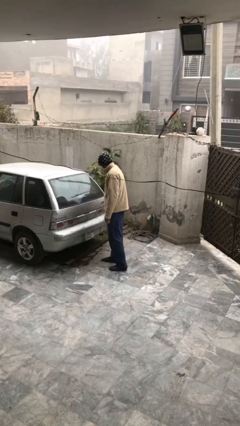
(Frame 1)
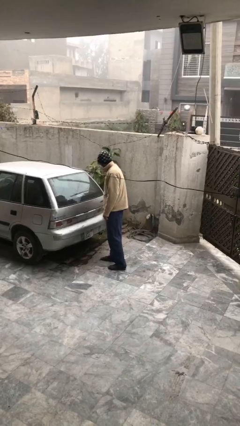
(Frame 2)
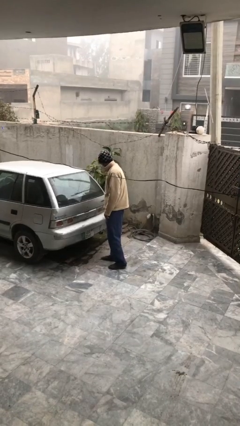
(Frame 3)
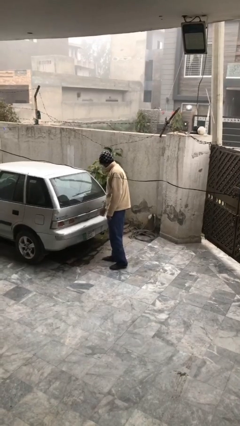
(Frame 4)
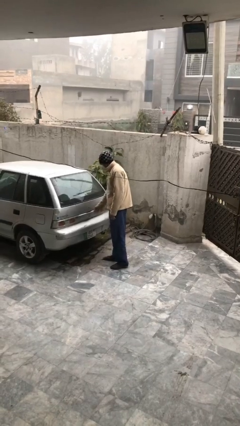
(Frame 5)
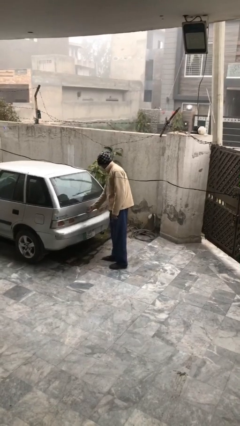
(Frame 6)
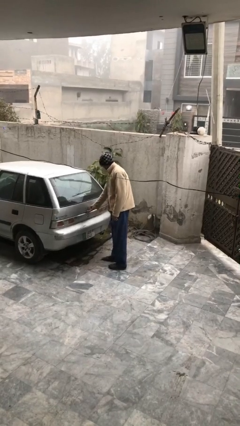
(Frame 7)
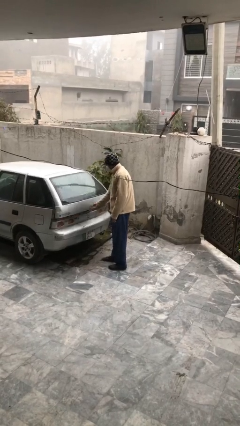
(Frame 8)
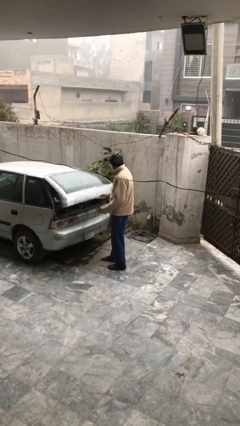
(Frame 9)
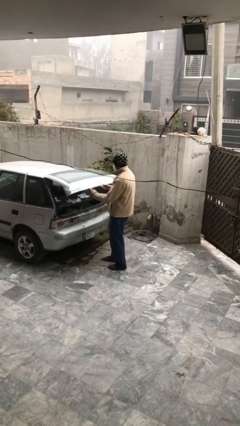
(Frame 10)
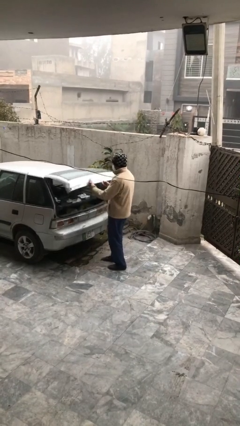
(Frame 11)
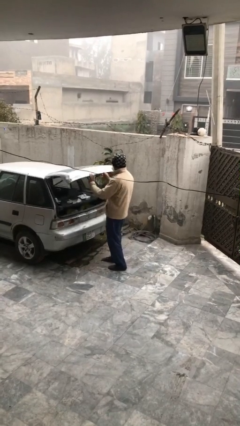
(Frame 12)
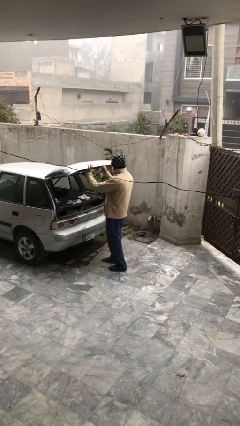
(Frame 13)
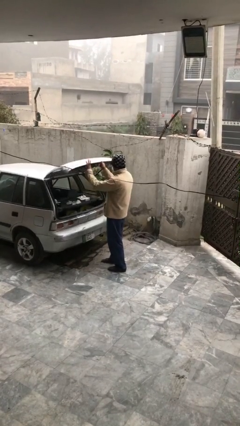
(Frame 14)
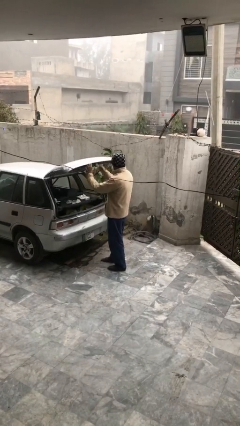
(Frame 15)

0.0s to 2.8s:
person opens car trunk

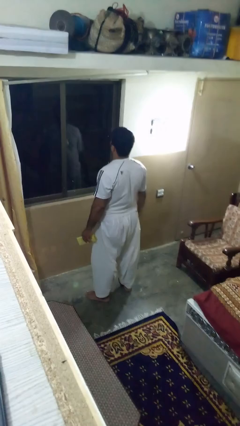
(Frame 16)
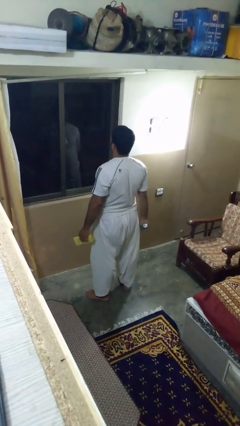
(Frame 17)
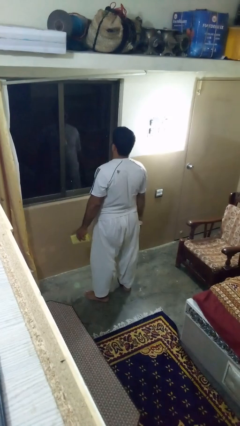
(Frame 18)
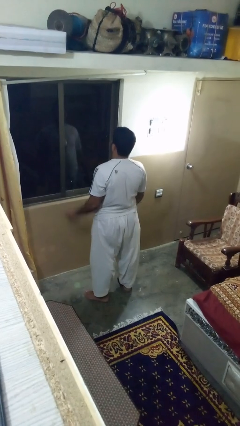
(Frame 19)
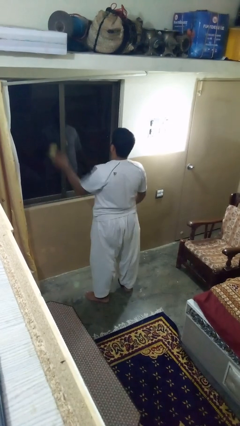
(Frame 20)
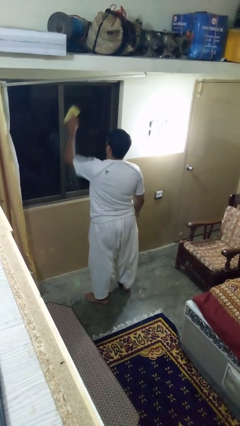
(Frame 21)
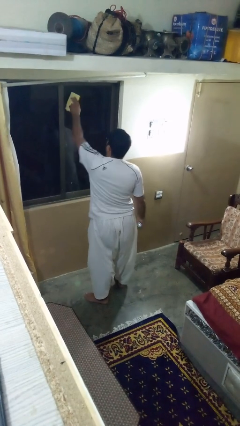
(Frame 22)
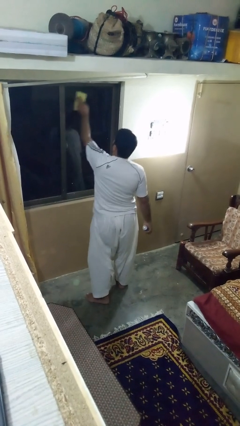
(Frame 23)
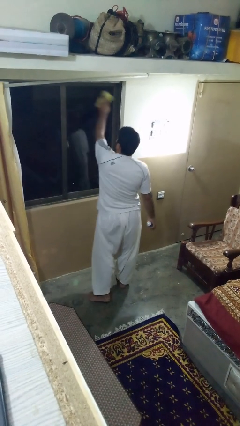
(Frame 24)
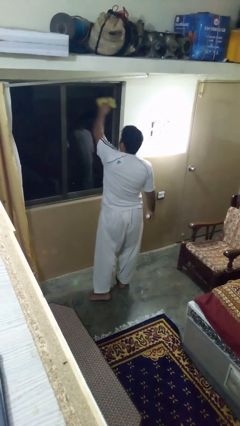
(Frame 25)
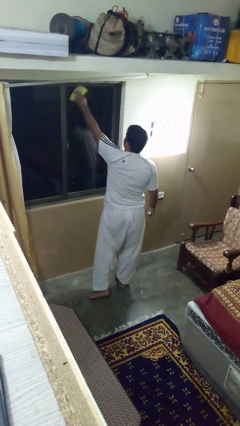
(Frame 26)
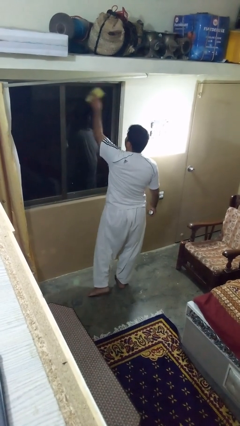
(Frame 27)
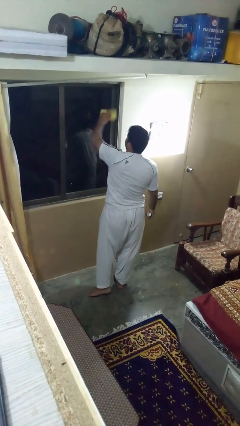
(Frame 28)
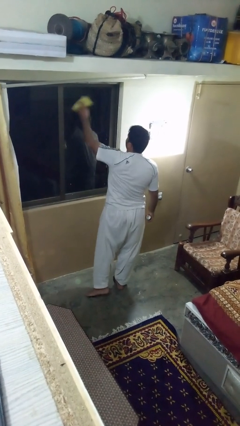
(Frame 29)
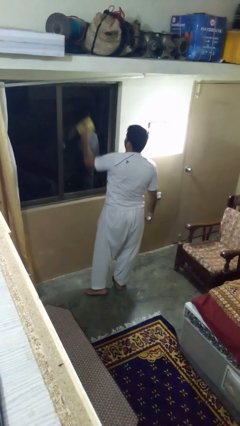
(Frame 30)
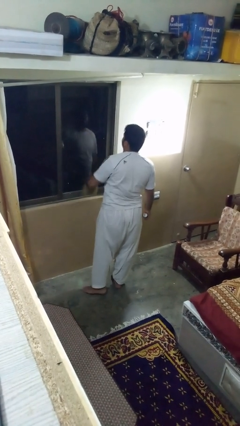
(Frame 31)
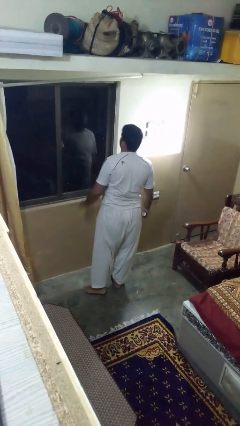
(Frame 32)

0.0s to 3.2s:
person washes window

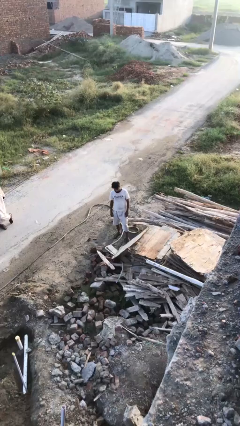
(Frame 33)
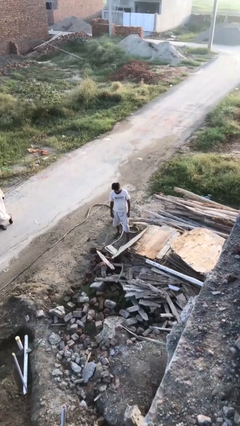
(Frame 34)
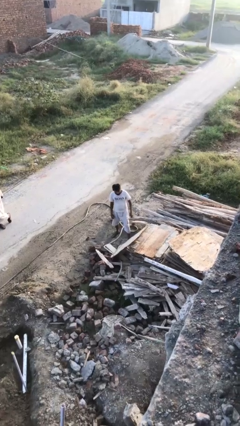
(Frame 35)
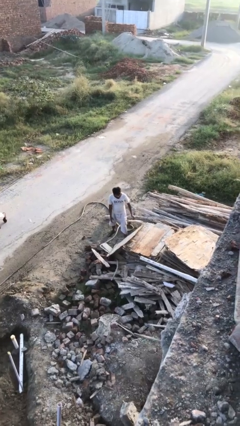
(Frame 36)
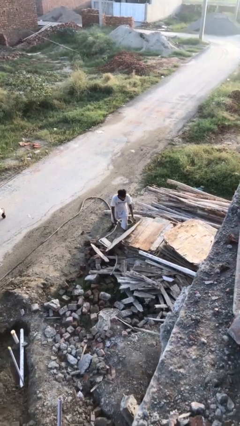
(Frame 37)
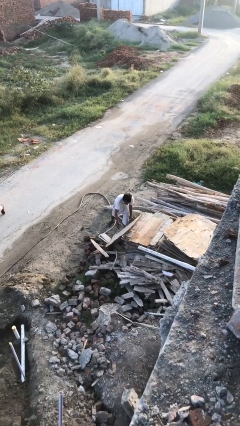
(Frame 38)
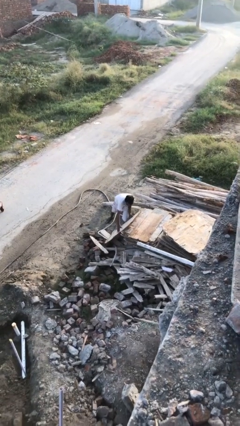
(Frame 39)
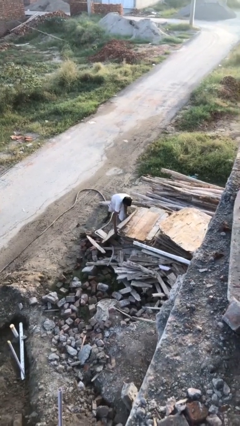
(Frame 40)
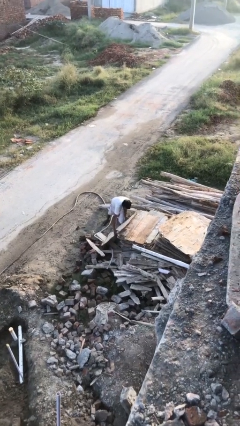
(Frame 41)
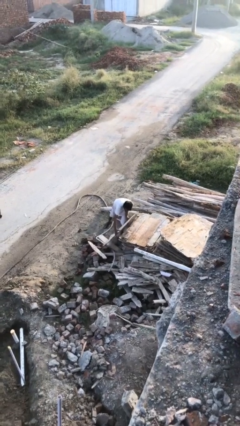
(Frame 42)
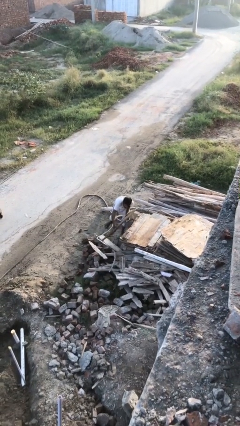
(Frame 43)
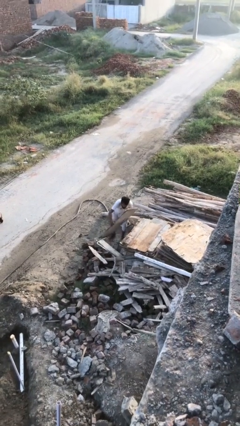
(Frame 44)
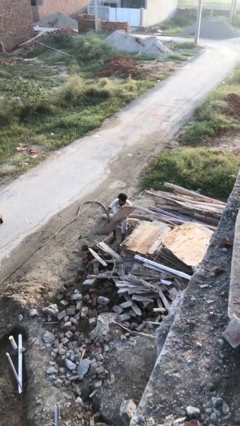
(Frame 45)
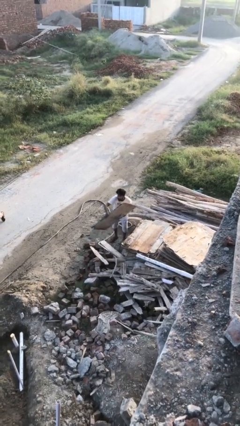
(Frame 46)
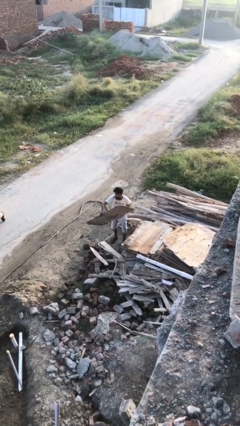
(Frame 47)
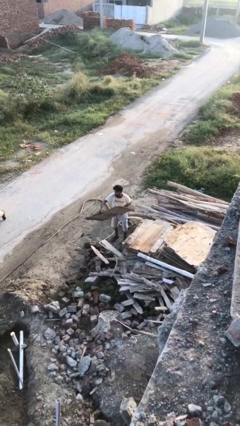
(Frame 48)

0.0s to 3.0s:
person picks up object from floor

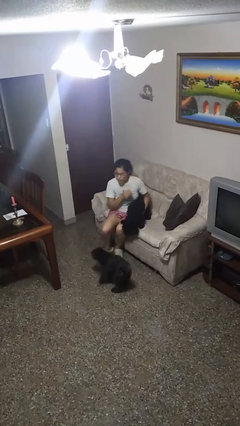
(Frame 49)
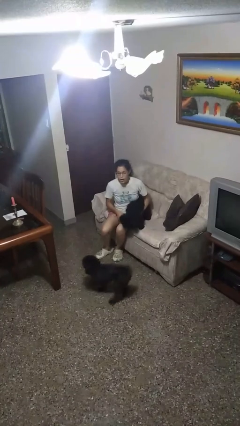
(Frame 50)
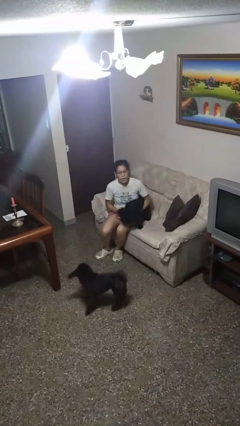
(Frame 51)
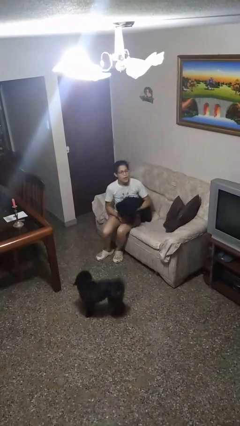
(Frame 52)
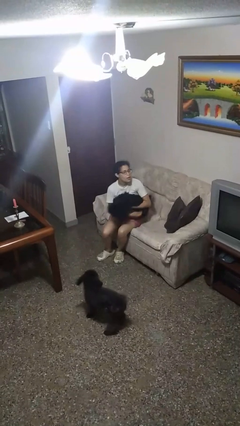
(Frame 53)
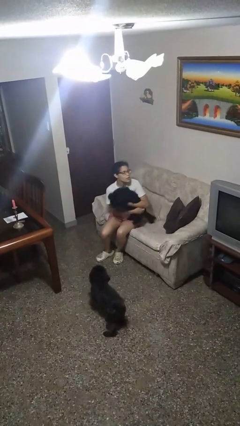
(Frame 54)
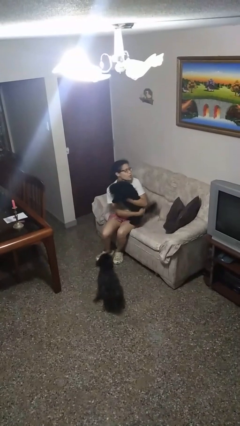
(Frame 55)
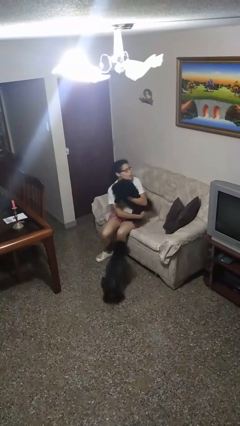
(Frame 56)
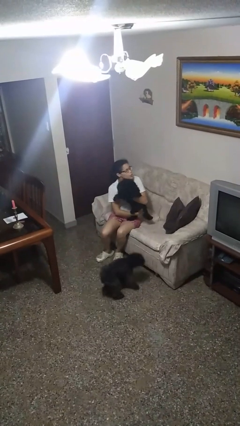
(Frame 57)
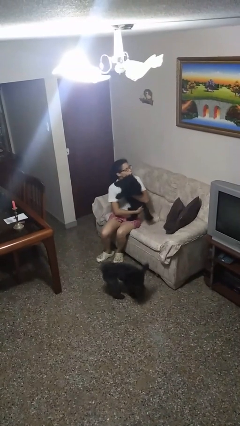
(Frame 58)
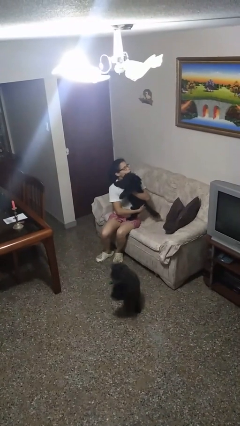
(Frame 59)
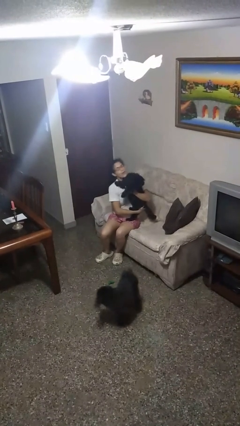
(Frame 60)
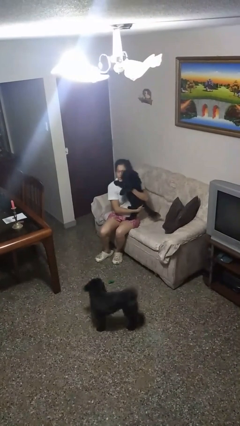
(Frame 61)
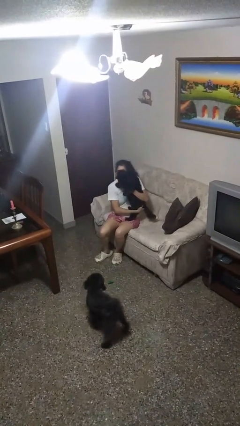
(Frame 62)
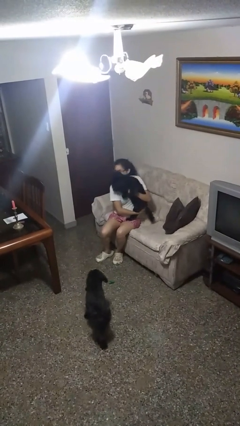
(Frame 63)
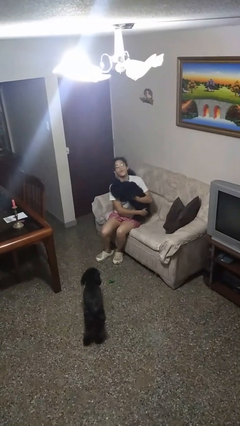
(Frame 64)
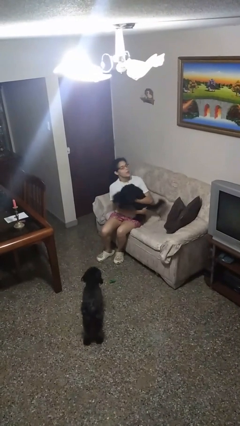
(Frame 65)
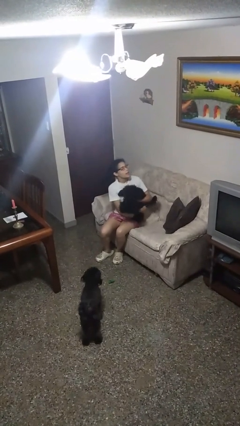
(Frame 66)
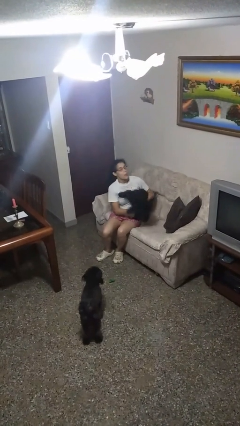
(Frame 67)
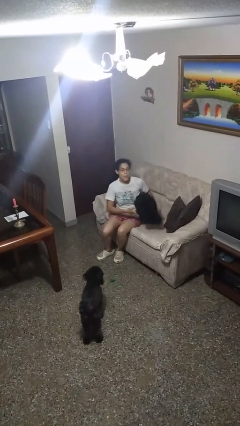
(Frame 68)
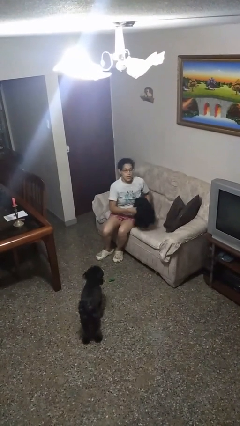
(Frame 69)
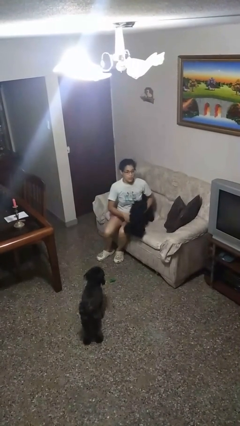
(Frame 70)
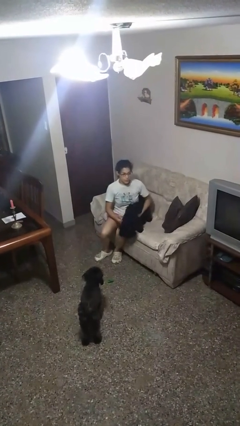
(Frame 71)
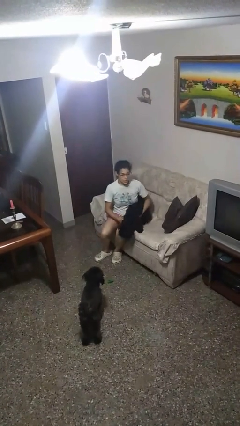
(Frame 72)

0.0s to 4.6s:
person hugs dog

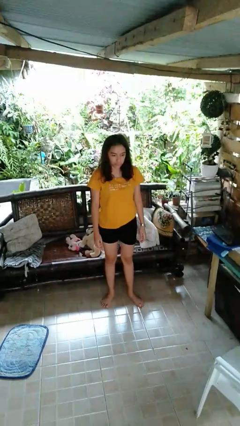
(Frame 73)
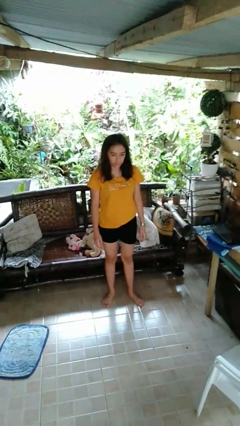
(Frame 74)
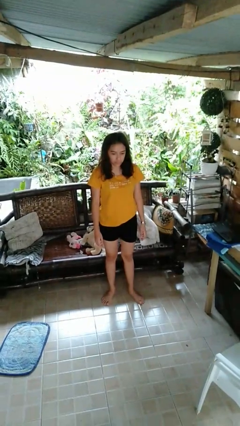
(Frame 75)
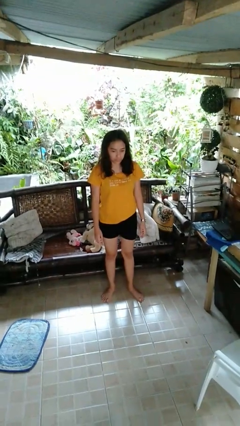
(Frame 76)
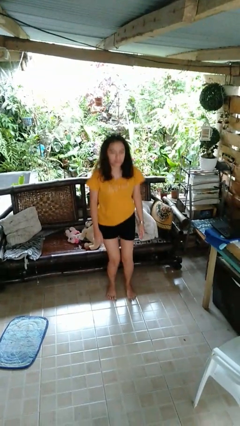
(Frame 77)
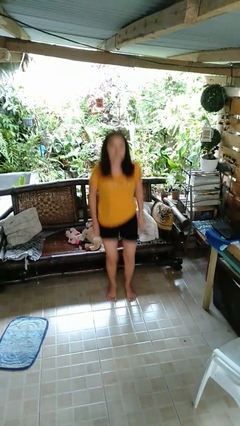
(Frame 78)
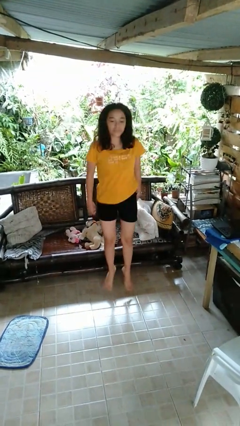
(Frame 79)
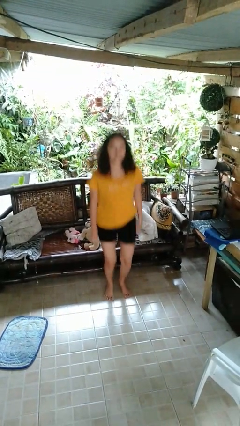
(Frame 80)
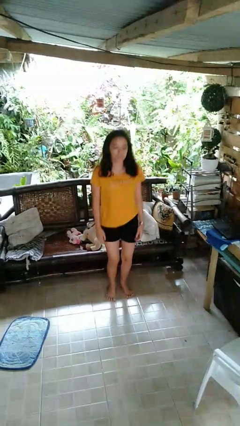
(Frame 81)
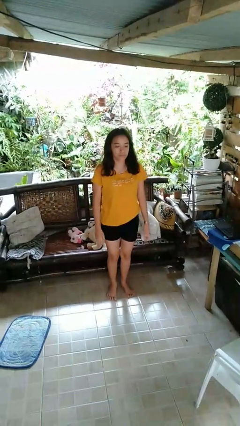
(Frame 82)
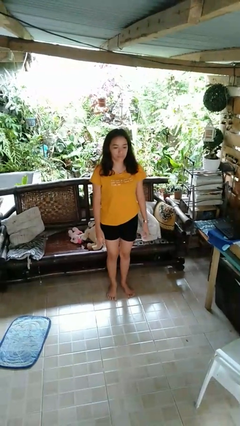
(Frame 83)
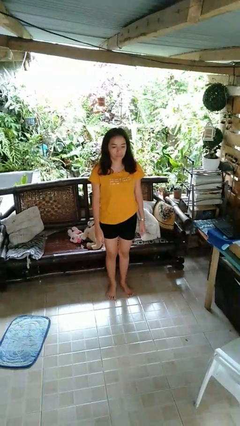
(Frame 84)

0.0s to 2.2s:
person jumps

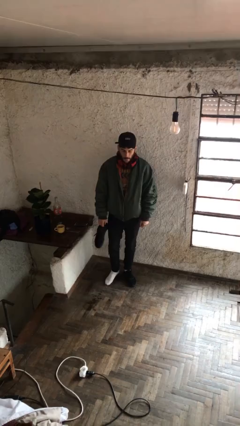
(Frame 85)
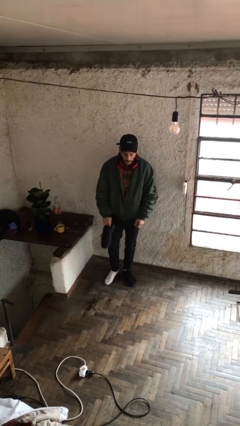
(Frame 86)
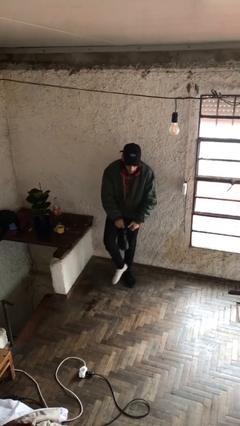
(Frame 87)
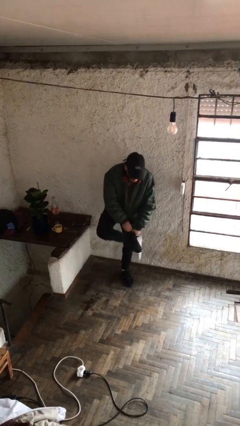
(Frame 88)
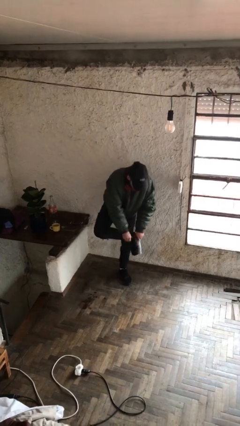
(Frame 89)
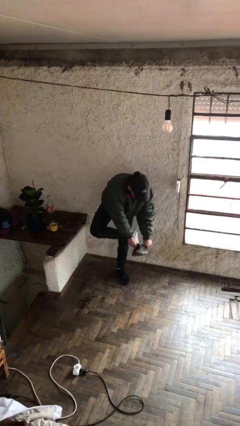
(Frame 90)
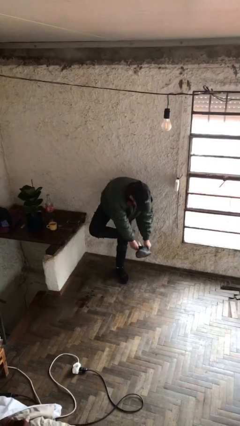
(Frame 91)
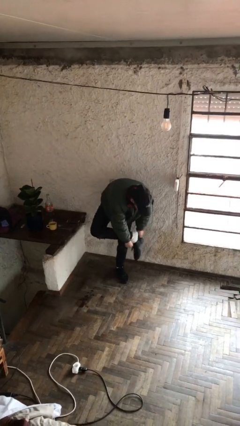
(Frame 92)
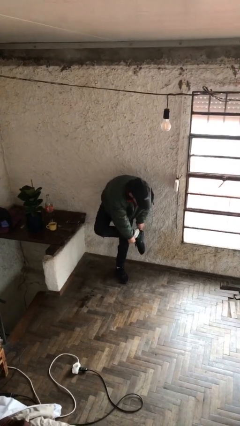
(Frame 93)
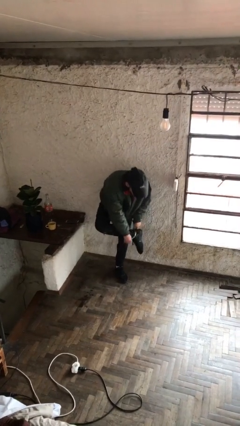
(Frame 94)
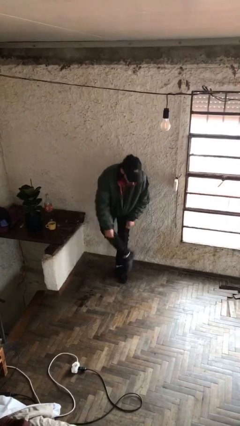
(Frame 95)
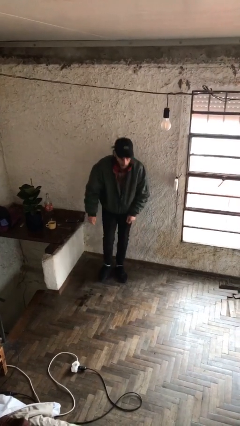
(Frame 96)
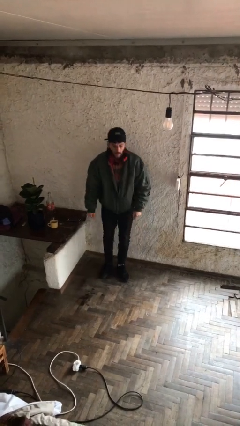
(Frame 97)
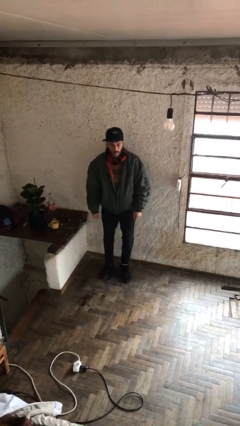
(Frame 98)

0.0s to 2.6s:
person puts on shoes
